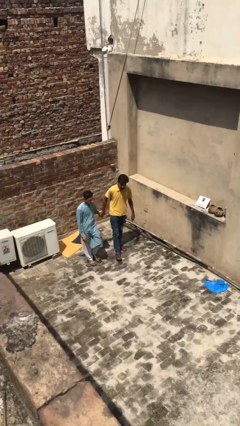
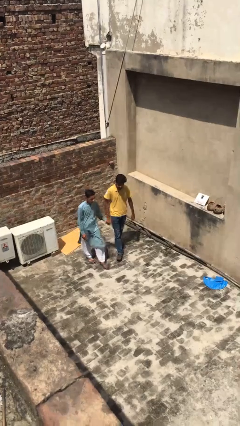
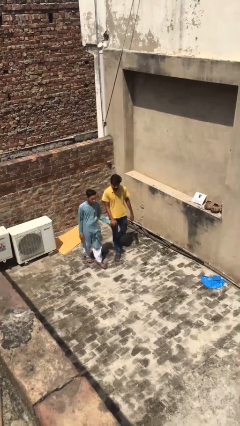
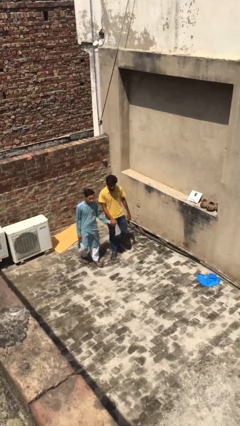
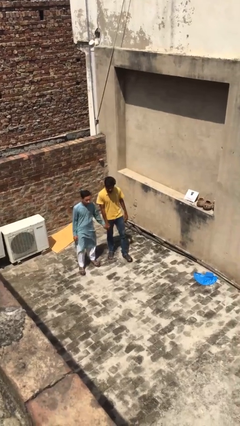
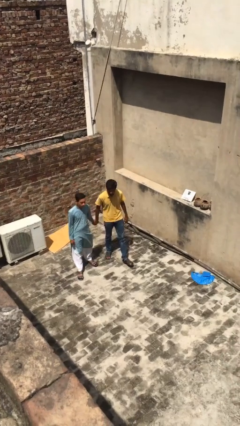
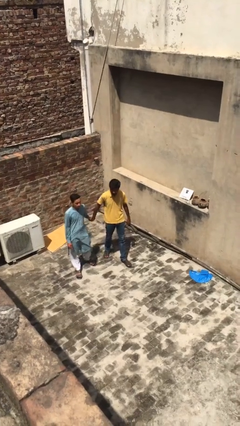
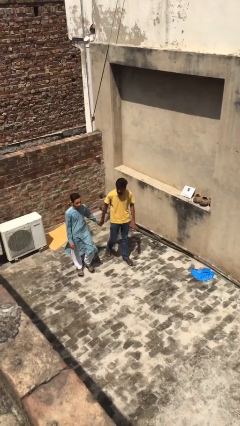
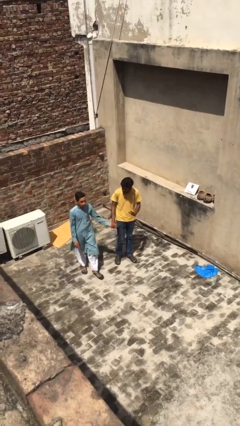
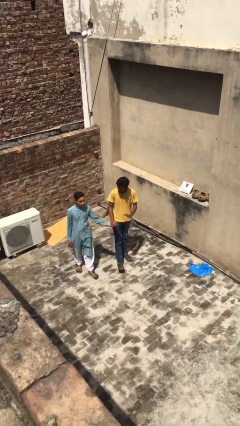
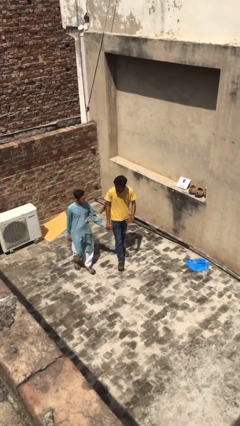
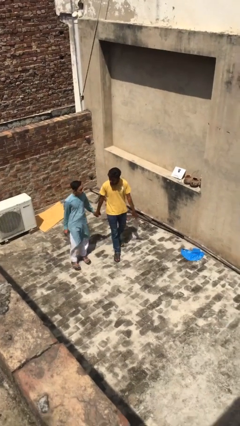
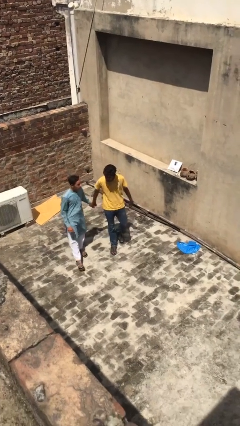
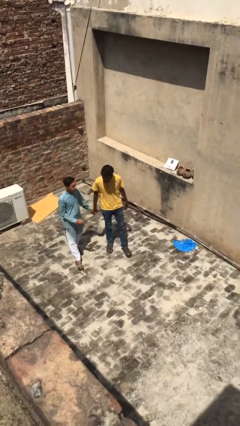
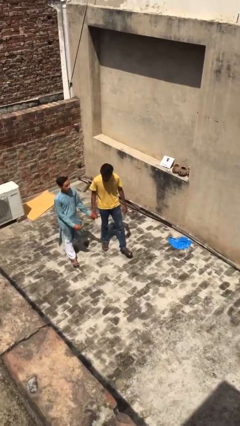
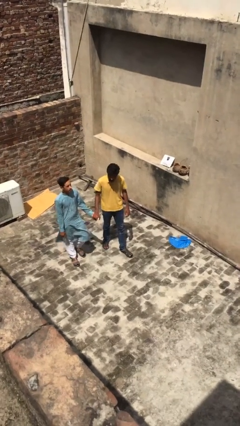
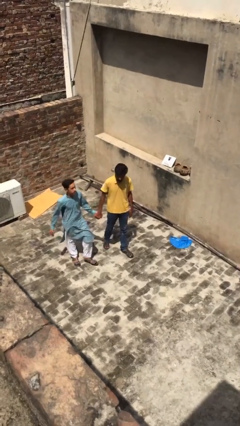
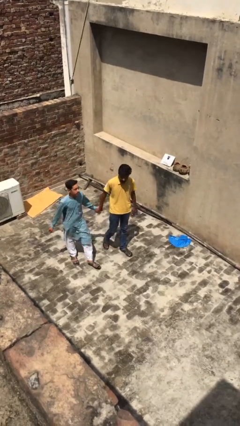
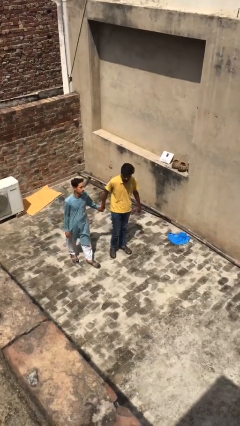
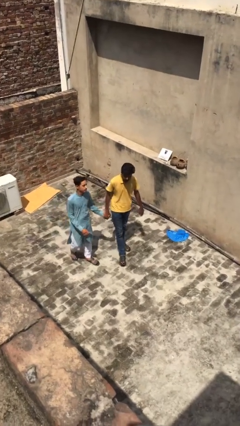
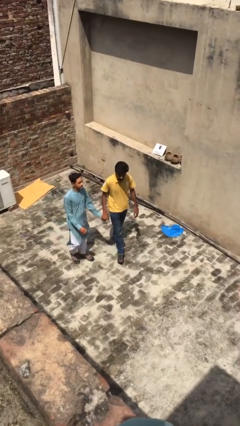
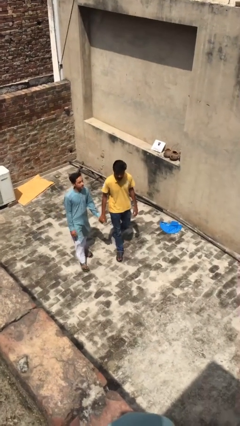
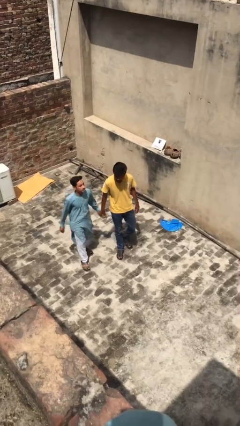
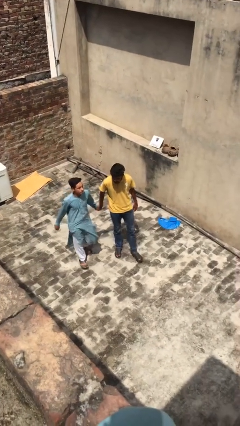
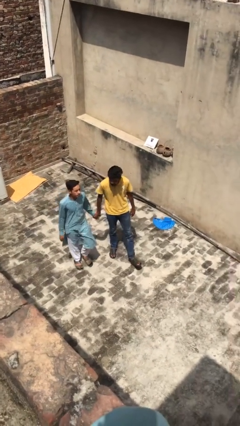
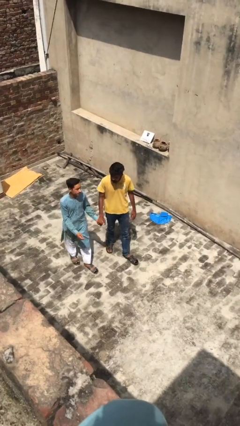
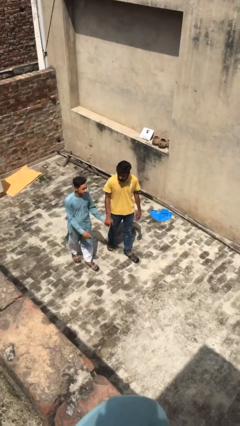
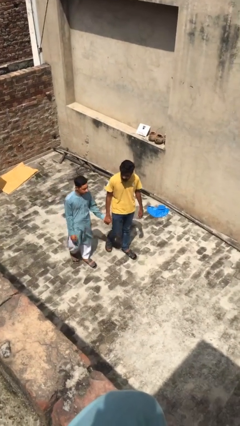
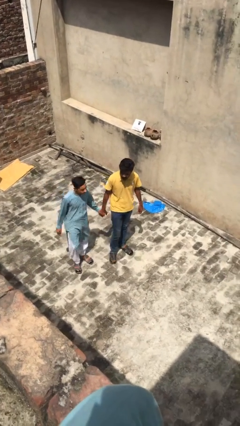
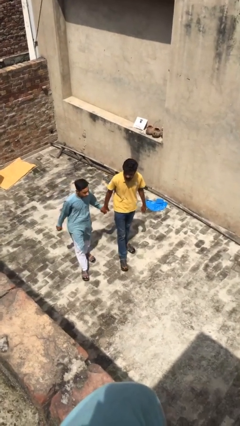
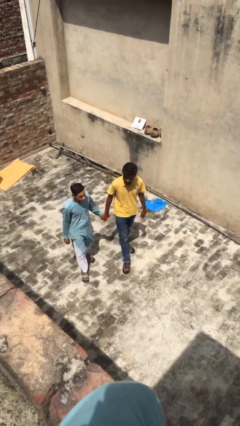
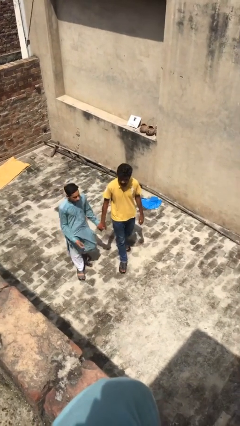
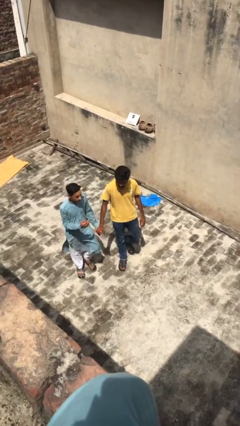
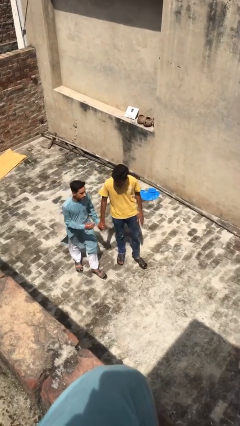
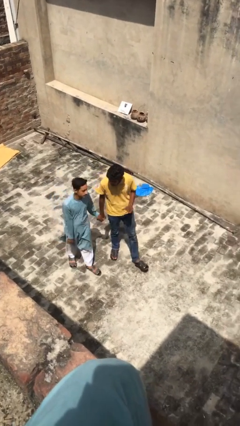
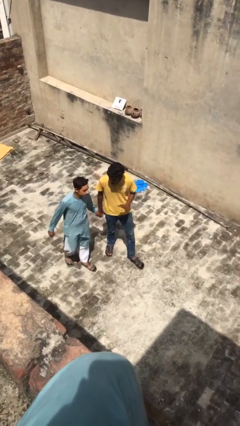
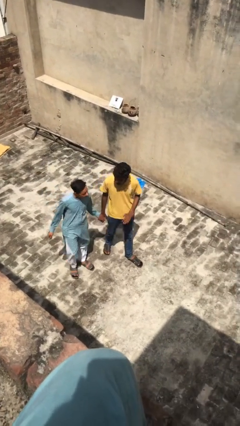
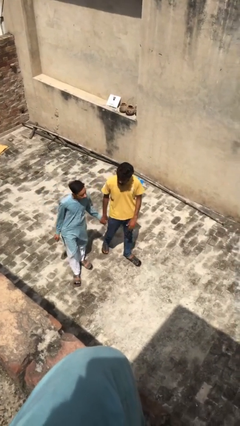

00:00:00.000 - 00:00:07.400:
person holds hand

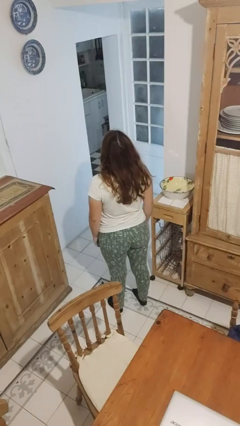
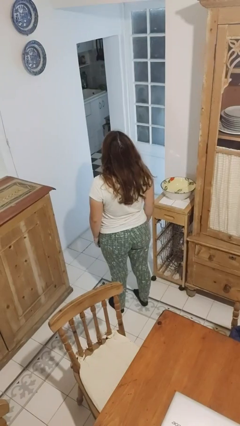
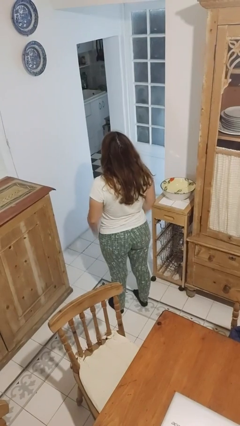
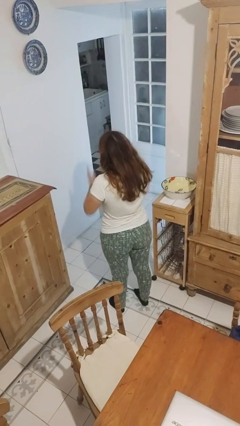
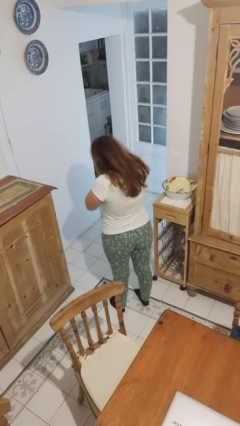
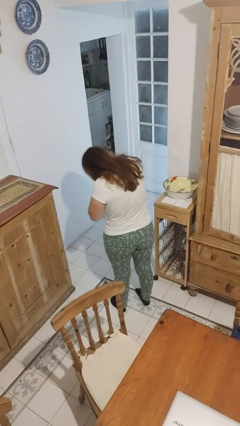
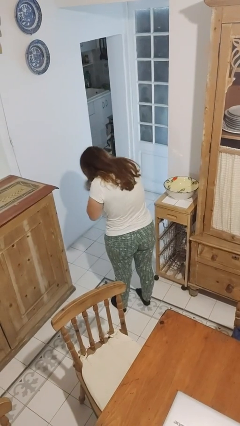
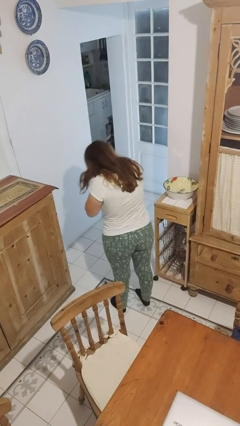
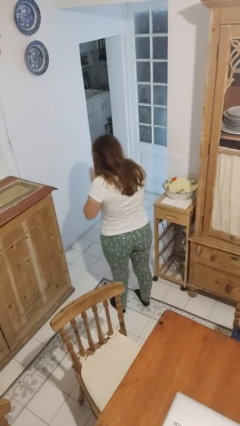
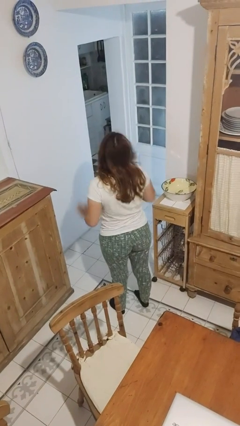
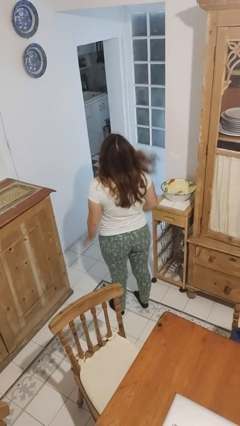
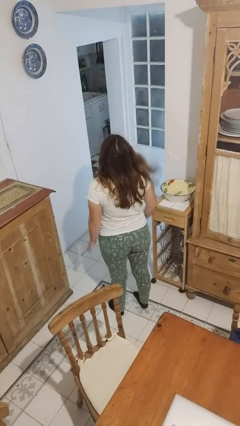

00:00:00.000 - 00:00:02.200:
person sneezes into hand

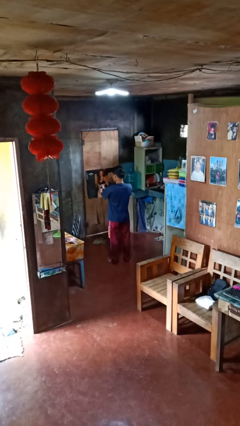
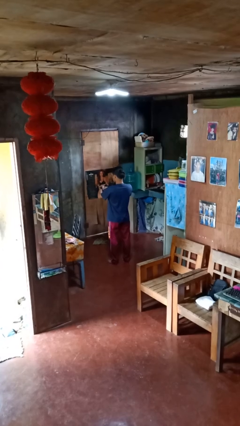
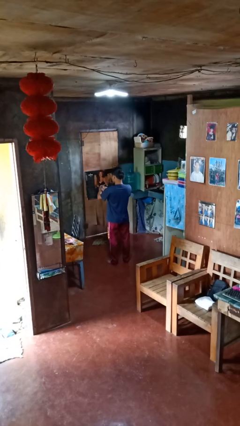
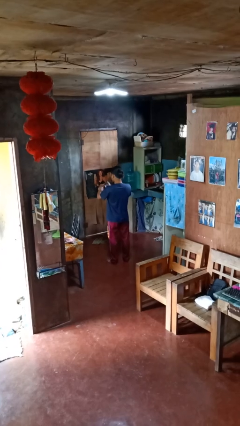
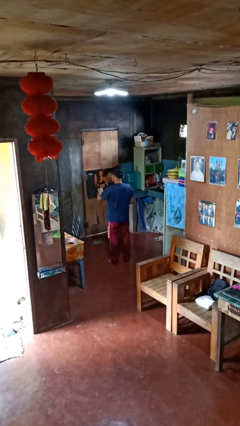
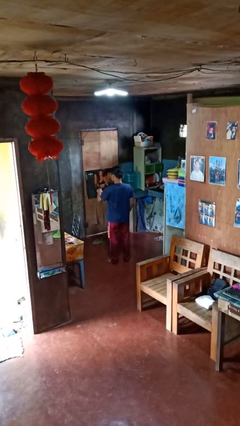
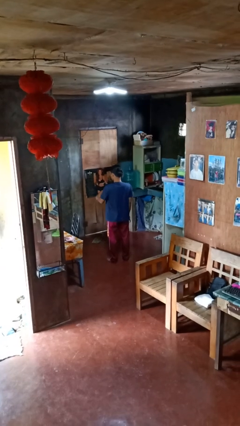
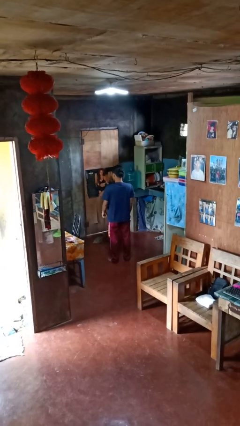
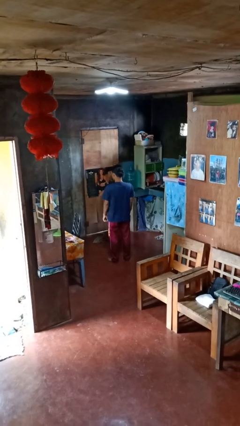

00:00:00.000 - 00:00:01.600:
person takes off wristwatch

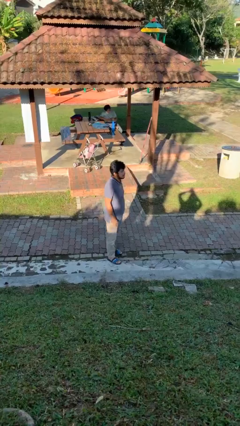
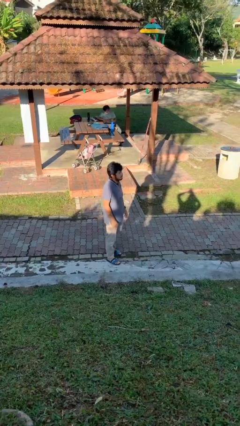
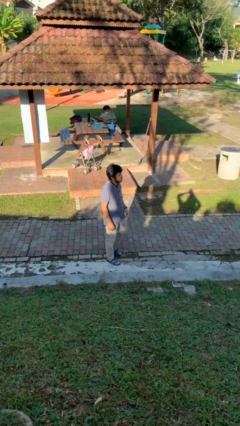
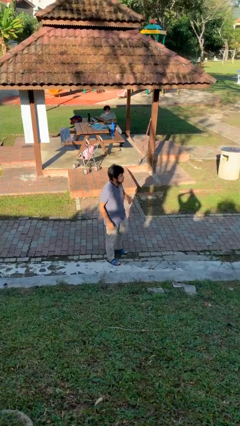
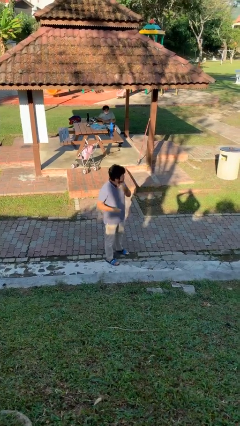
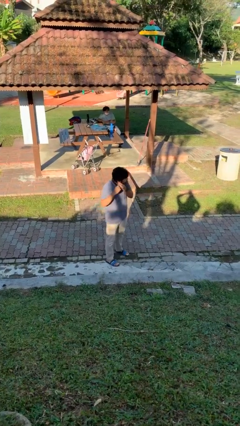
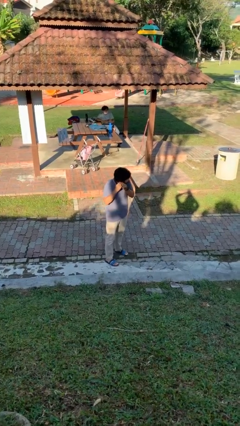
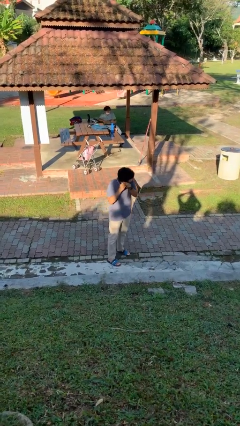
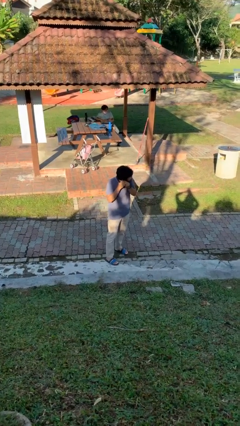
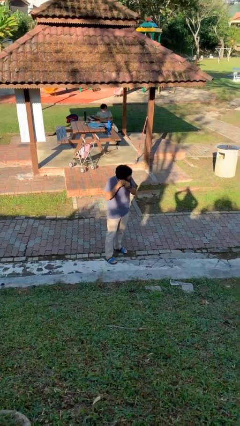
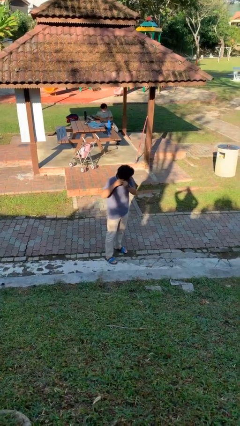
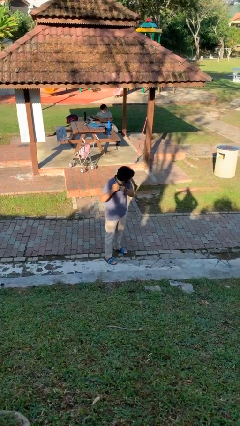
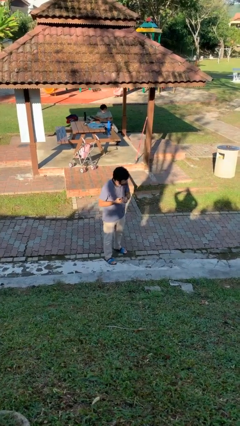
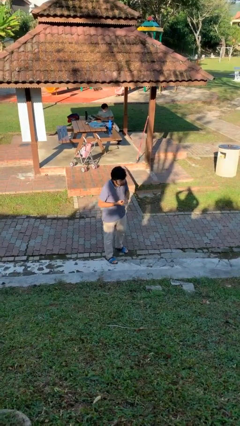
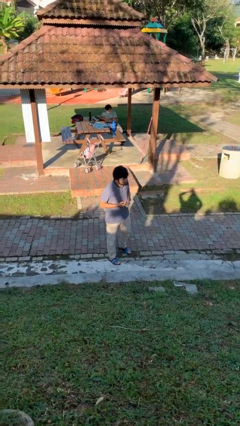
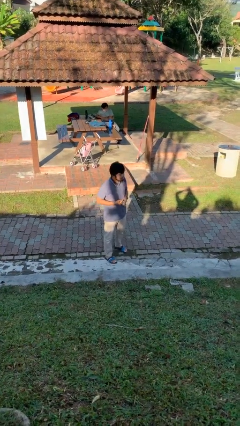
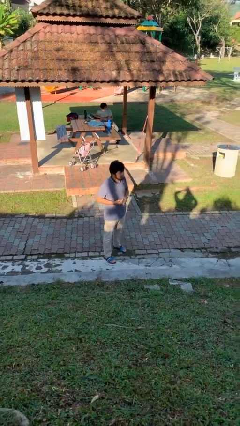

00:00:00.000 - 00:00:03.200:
person takes off earrings

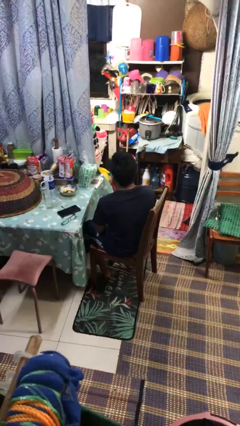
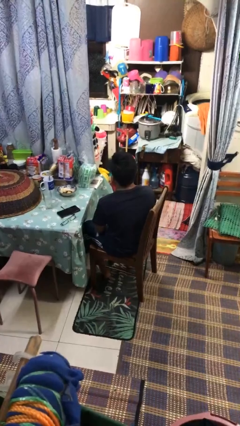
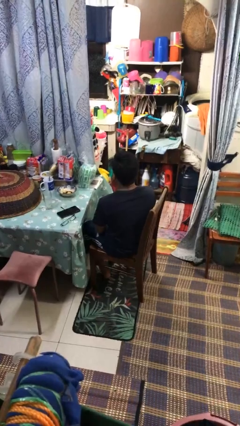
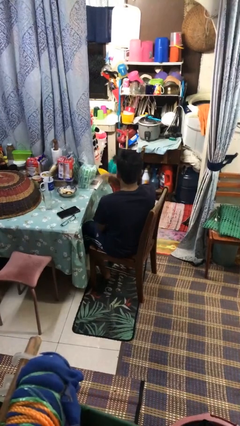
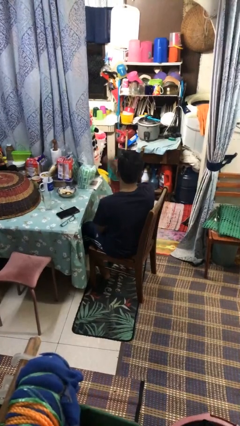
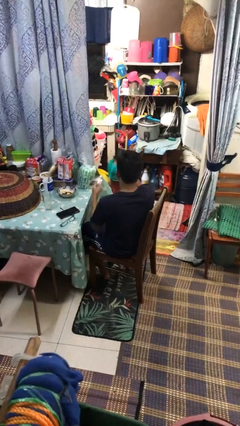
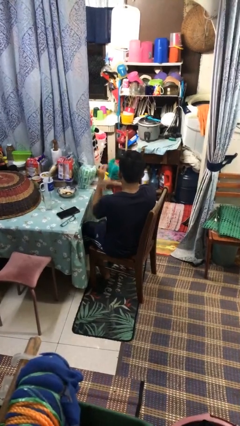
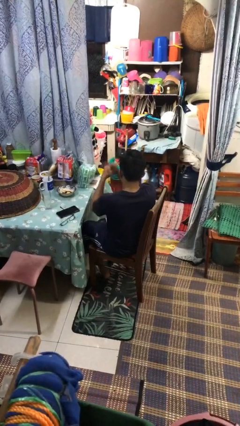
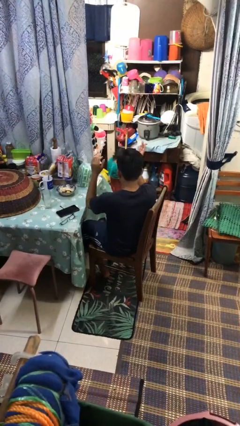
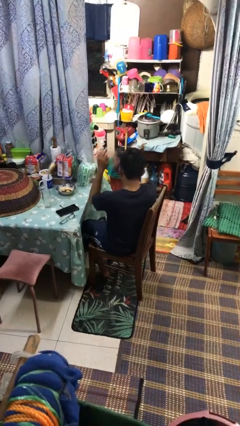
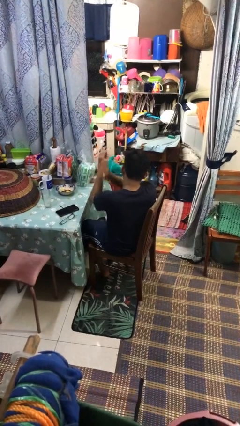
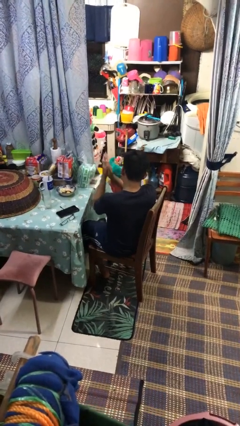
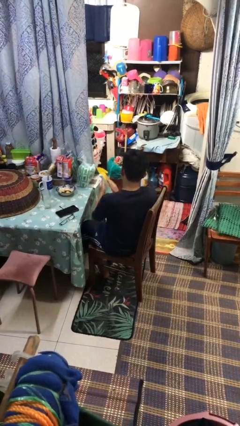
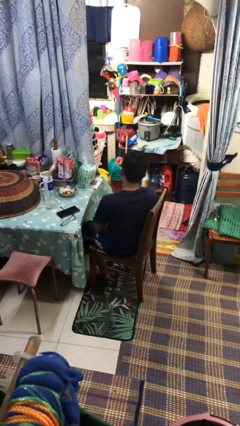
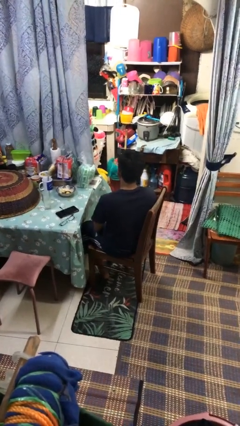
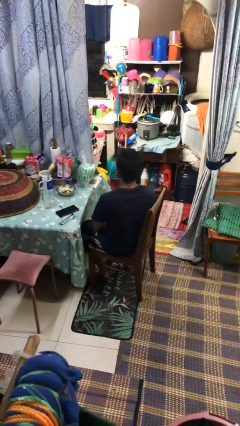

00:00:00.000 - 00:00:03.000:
person swats bug

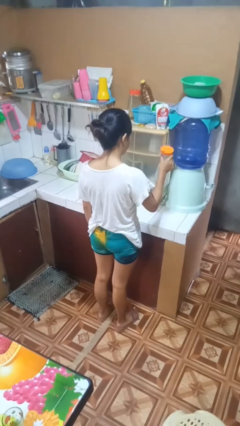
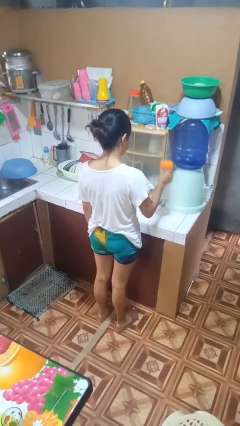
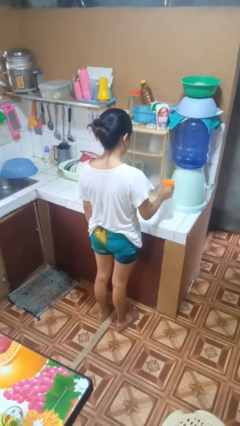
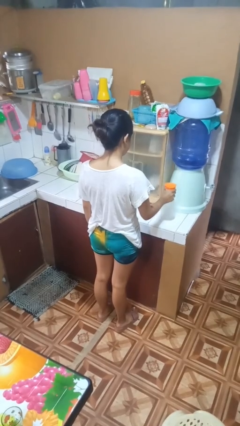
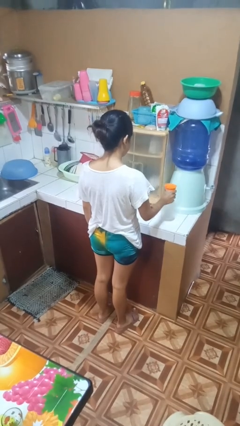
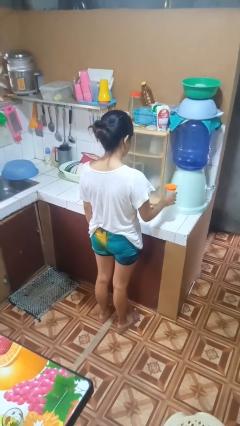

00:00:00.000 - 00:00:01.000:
person puts down object on countertop
